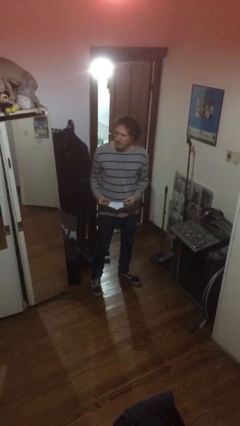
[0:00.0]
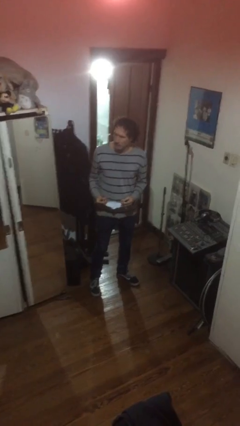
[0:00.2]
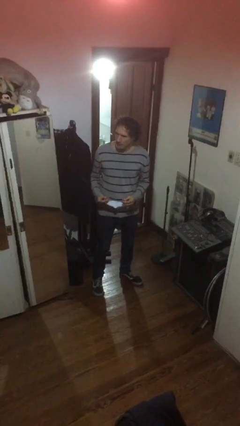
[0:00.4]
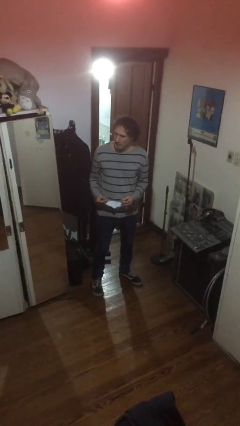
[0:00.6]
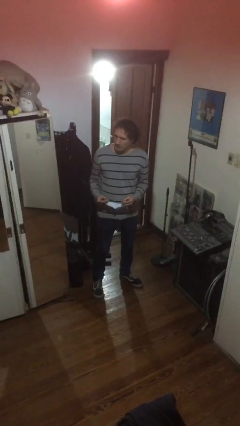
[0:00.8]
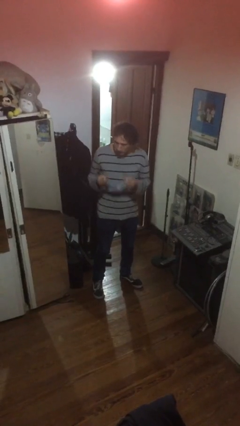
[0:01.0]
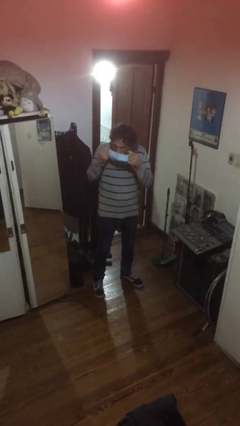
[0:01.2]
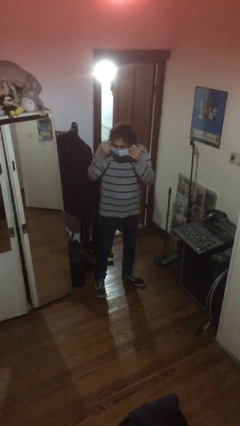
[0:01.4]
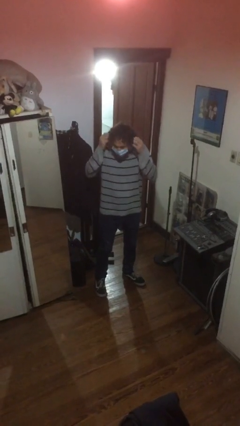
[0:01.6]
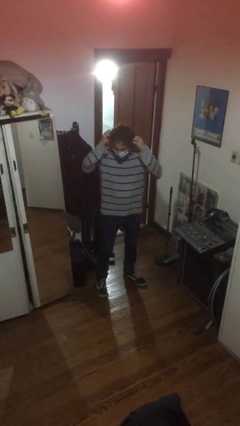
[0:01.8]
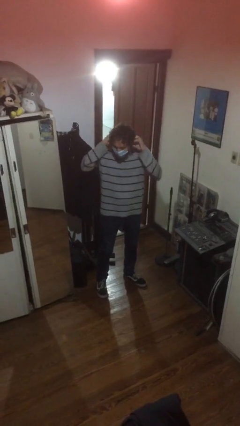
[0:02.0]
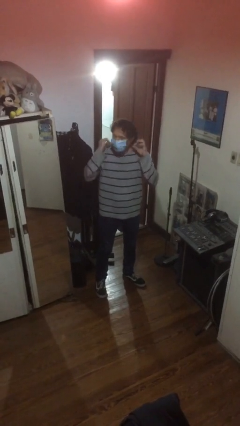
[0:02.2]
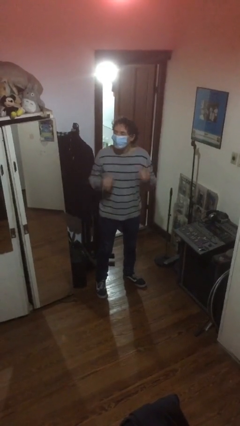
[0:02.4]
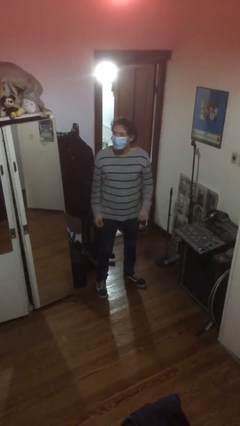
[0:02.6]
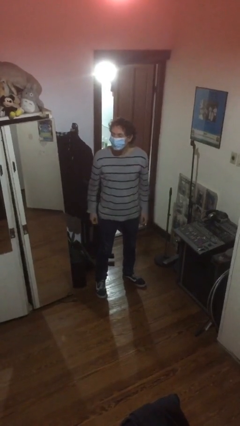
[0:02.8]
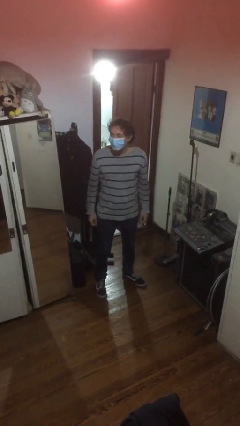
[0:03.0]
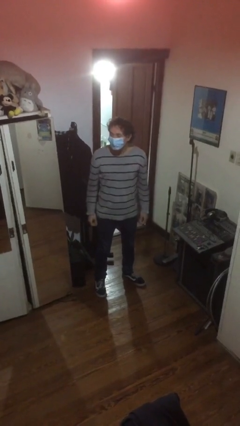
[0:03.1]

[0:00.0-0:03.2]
person puts on facemask

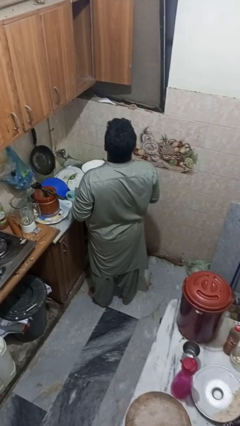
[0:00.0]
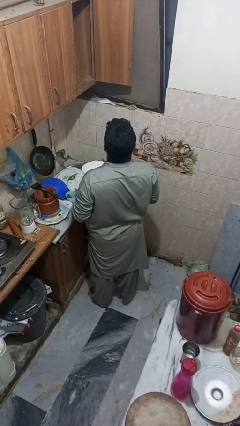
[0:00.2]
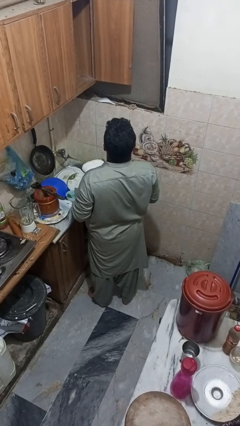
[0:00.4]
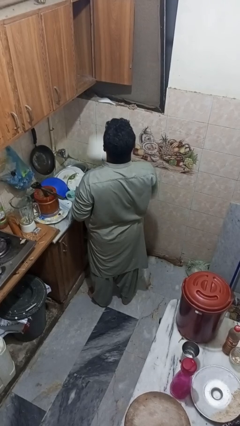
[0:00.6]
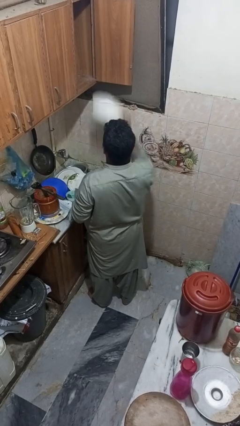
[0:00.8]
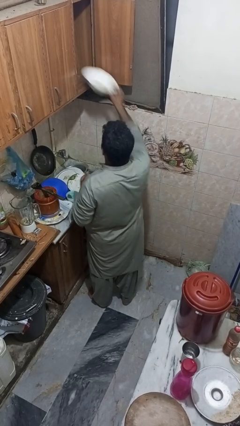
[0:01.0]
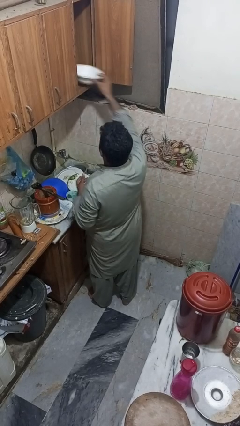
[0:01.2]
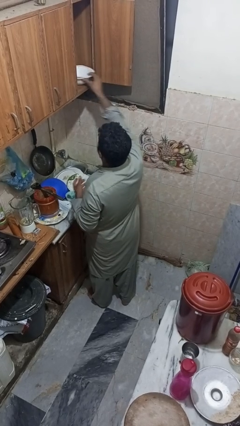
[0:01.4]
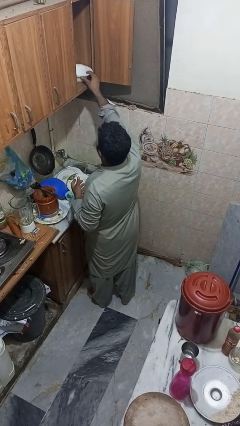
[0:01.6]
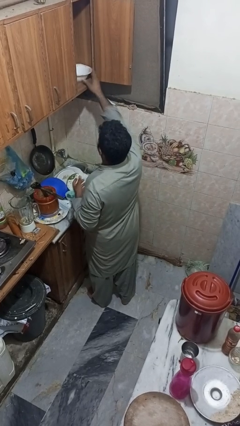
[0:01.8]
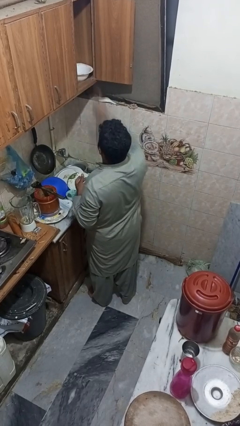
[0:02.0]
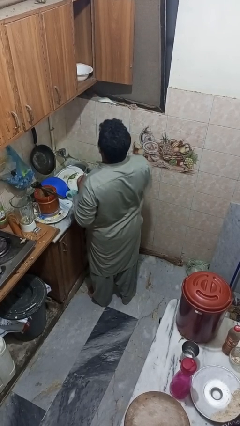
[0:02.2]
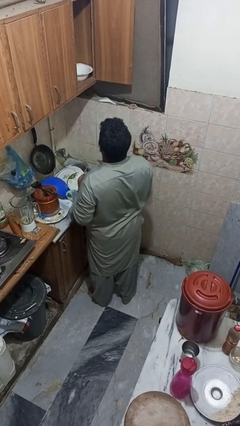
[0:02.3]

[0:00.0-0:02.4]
person puts object in cabinet

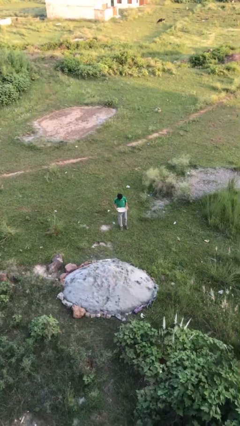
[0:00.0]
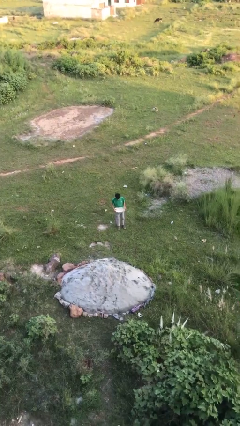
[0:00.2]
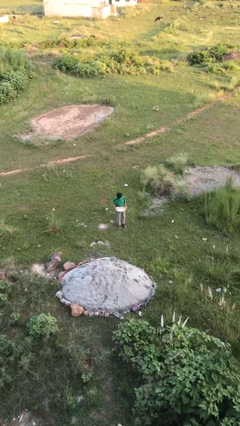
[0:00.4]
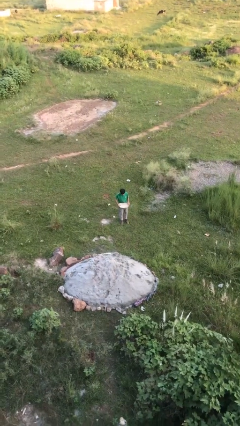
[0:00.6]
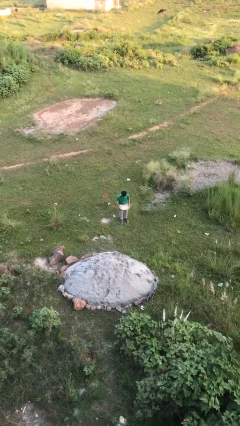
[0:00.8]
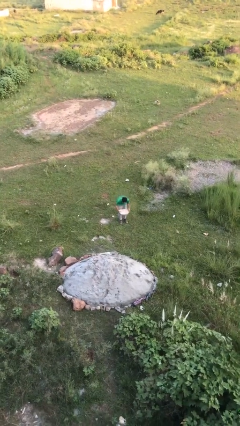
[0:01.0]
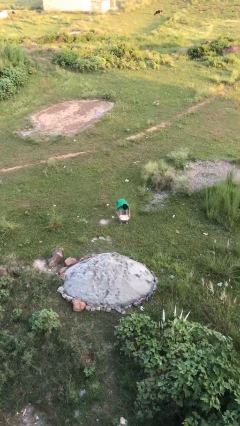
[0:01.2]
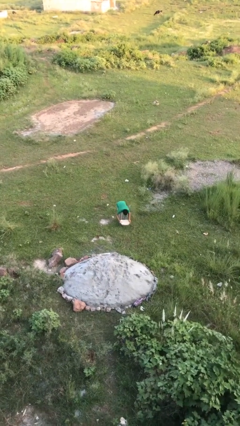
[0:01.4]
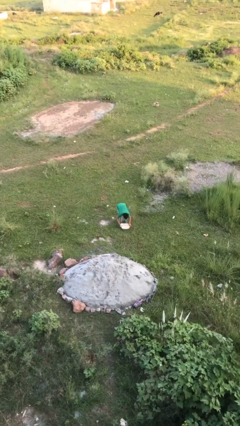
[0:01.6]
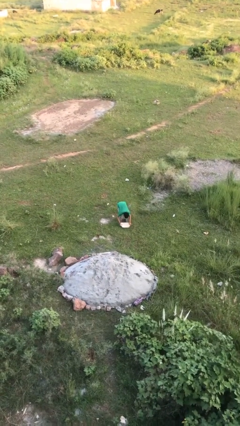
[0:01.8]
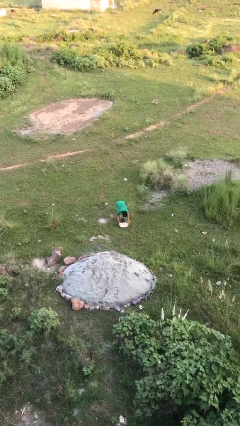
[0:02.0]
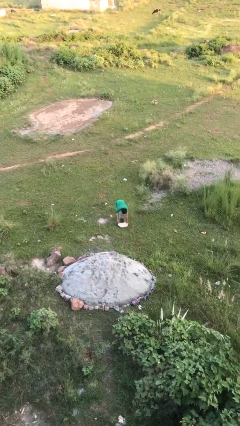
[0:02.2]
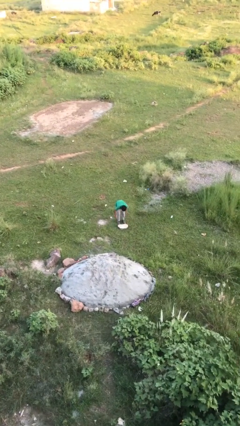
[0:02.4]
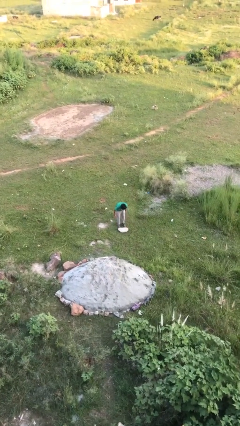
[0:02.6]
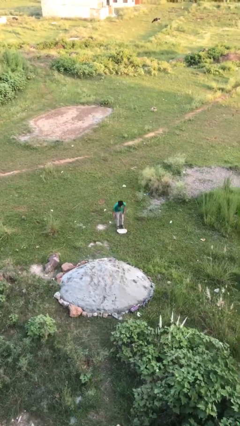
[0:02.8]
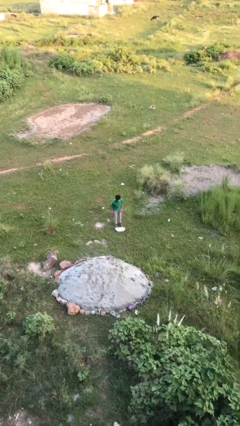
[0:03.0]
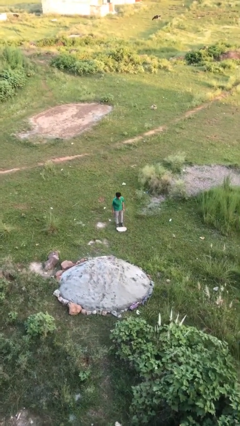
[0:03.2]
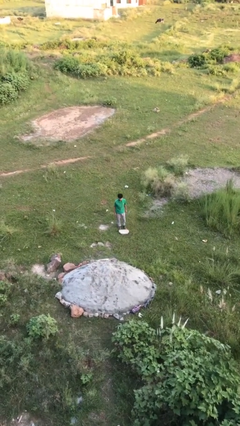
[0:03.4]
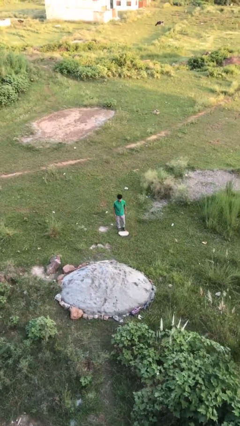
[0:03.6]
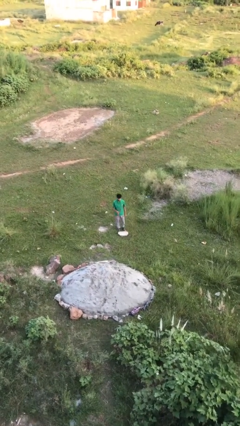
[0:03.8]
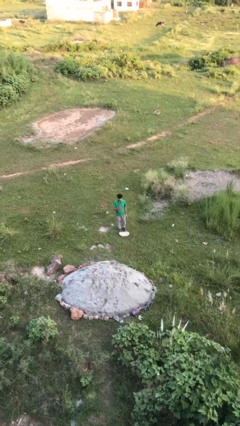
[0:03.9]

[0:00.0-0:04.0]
person puts down object on floor

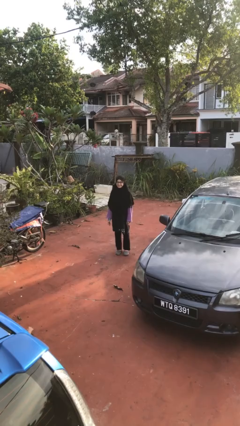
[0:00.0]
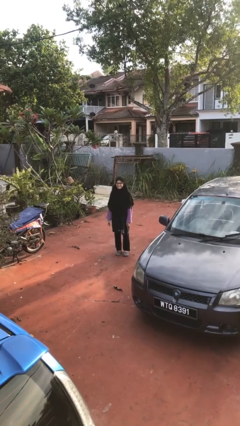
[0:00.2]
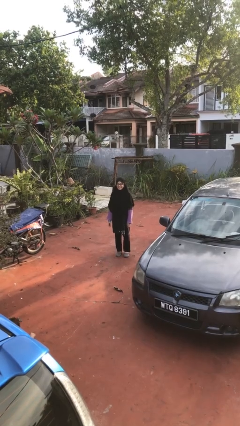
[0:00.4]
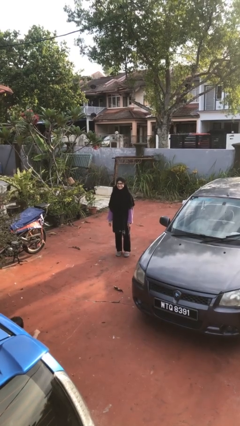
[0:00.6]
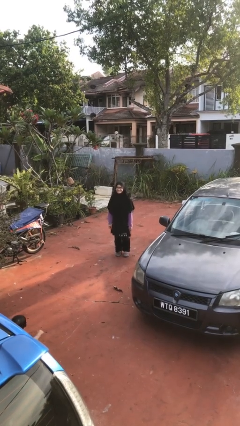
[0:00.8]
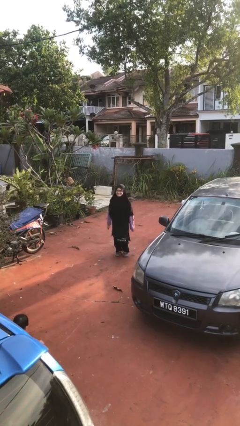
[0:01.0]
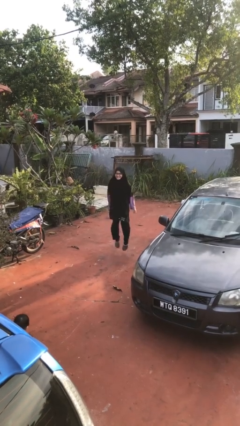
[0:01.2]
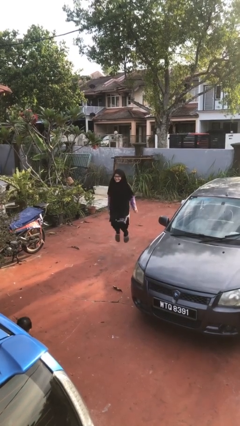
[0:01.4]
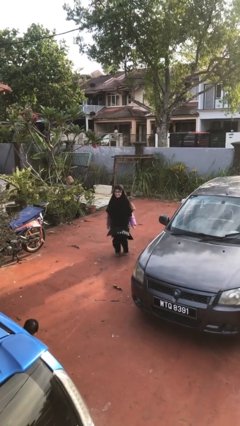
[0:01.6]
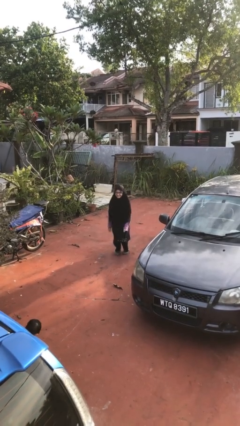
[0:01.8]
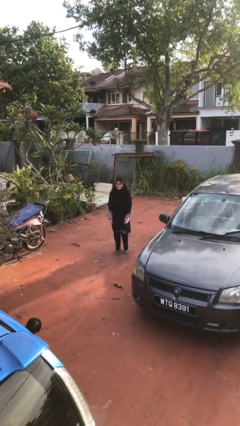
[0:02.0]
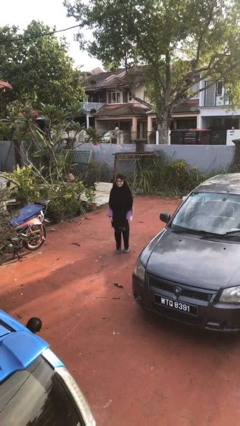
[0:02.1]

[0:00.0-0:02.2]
person jumps

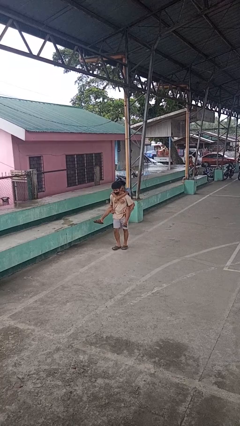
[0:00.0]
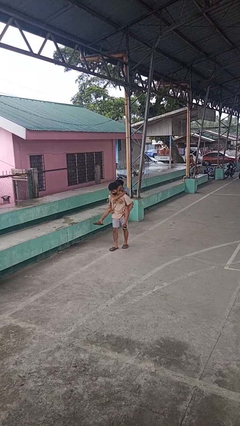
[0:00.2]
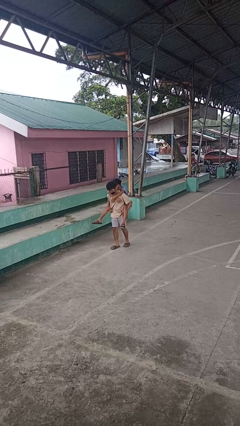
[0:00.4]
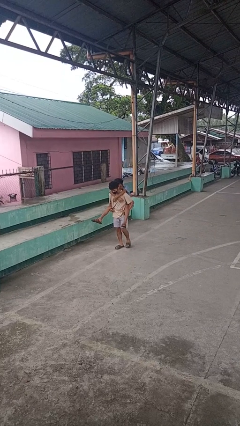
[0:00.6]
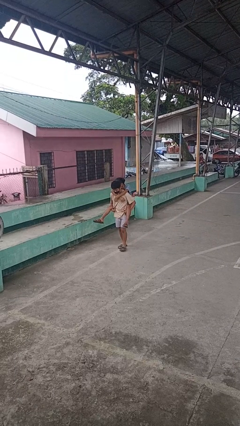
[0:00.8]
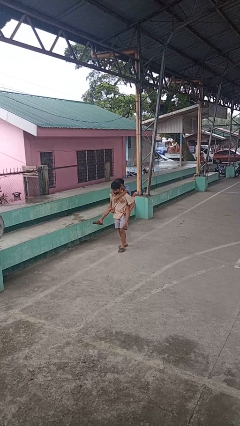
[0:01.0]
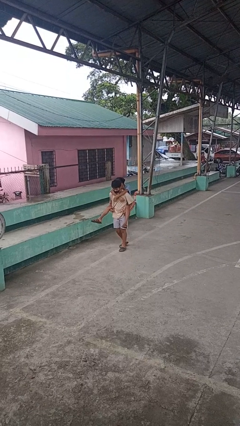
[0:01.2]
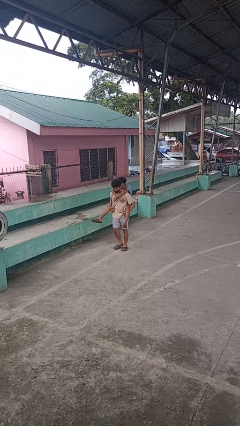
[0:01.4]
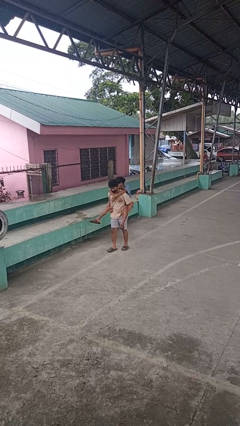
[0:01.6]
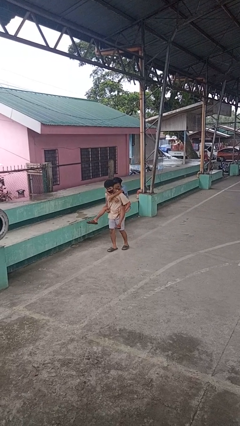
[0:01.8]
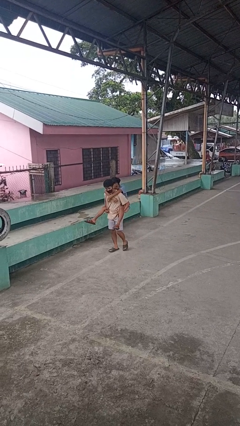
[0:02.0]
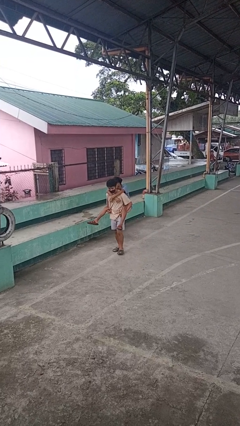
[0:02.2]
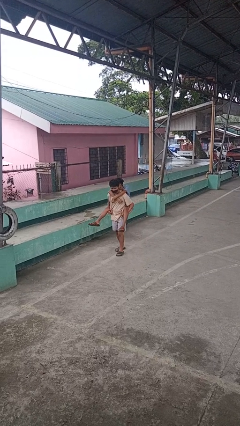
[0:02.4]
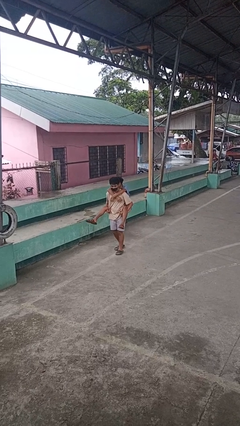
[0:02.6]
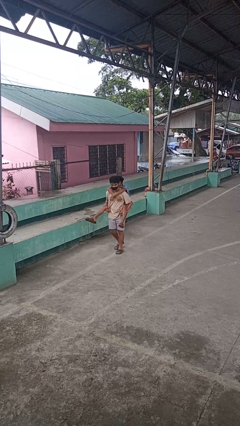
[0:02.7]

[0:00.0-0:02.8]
person carries person on back

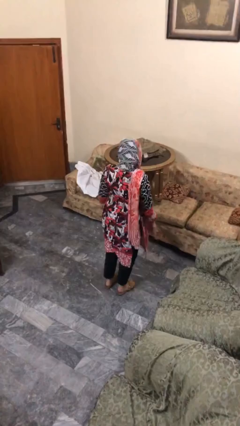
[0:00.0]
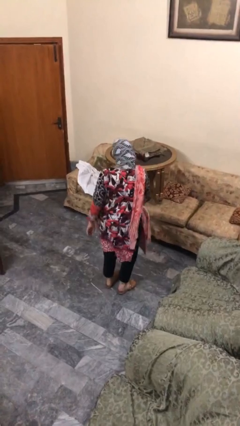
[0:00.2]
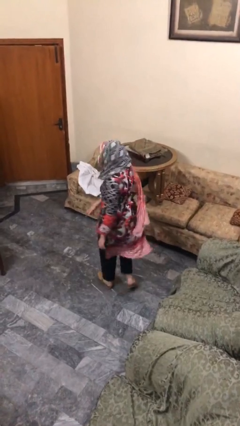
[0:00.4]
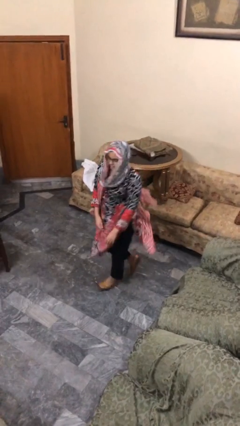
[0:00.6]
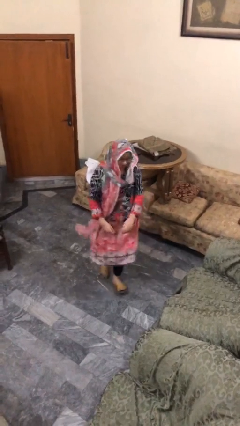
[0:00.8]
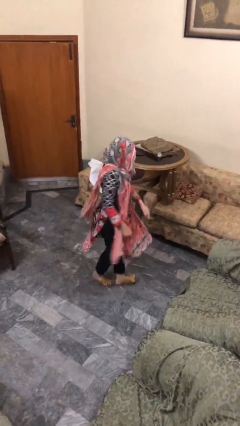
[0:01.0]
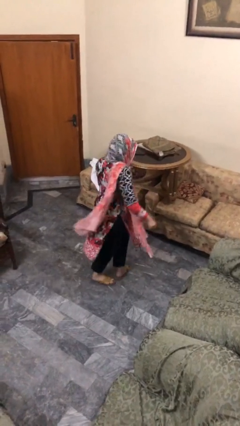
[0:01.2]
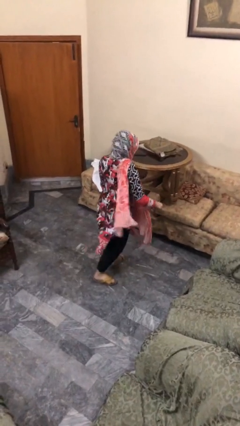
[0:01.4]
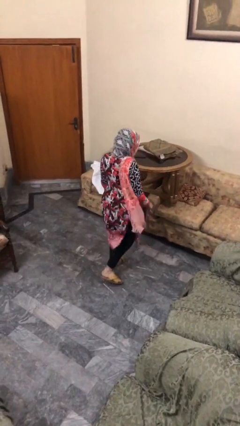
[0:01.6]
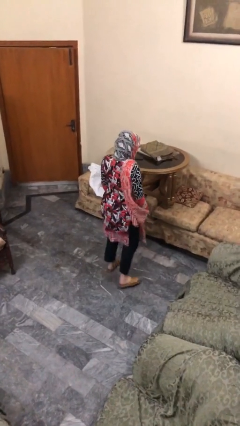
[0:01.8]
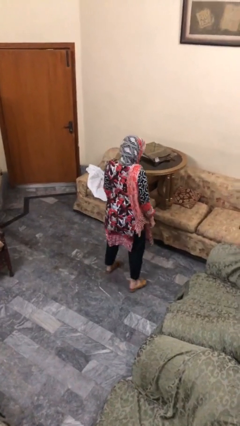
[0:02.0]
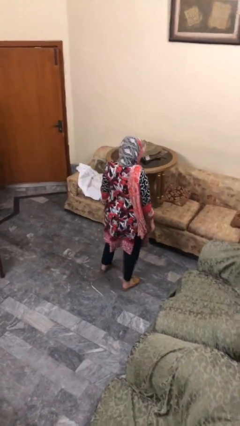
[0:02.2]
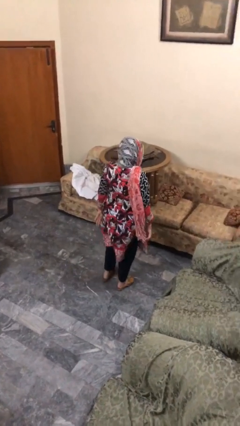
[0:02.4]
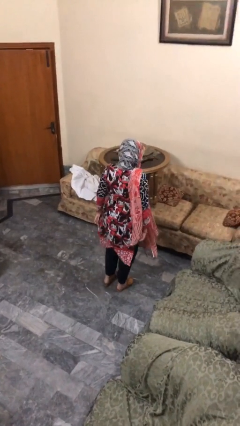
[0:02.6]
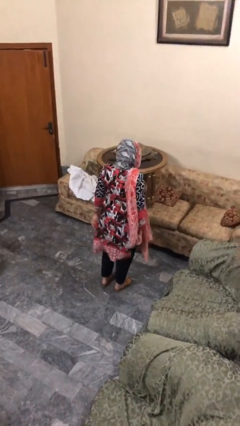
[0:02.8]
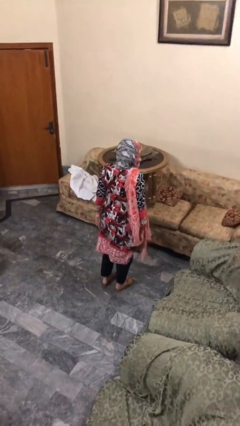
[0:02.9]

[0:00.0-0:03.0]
person twirls
